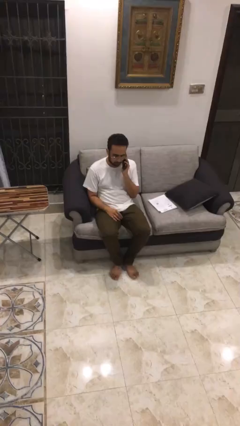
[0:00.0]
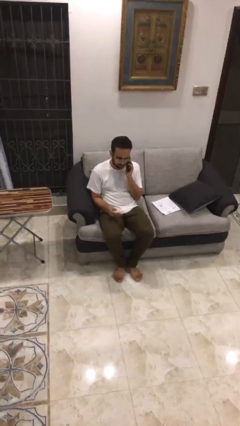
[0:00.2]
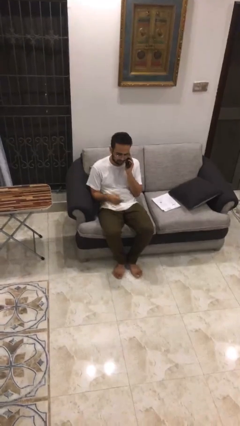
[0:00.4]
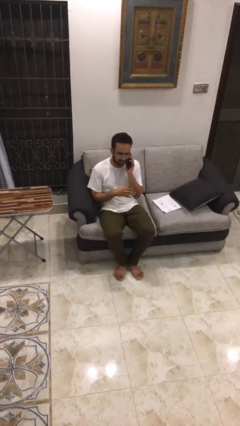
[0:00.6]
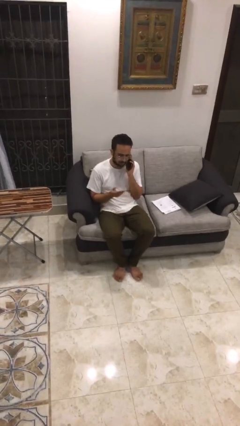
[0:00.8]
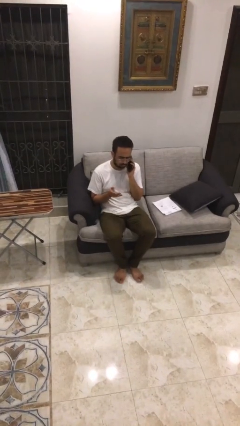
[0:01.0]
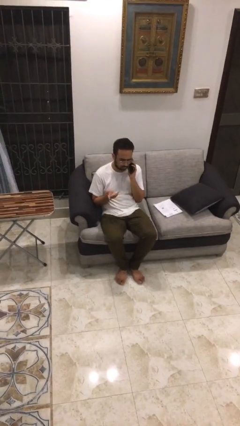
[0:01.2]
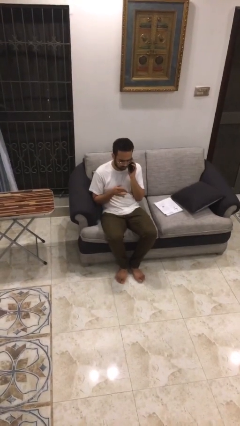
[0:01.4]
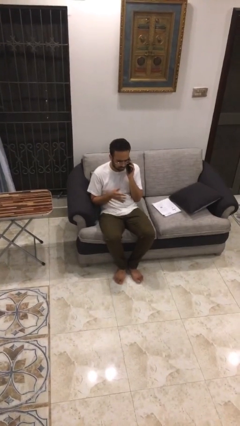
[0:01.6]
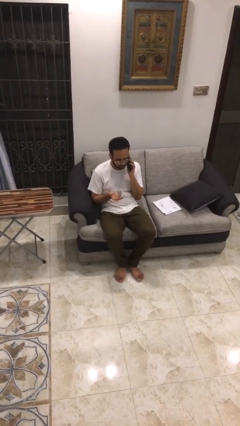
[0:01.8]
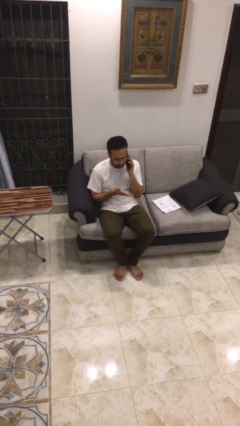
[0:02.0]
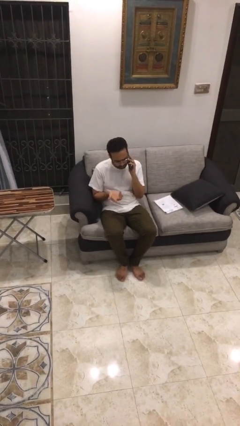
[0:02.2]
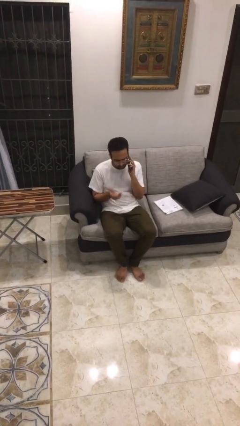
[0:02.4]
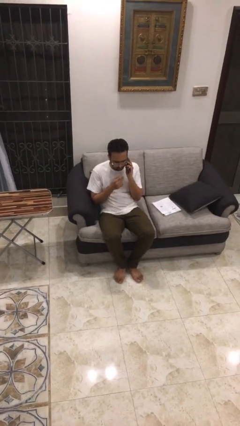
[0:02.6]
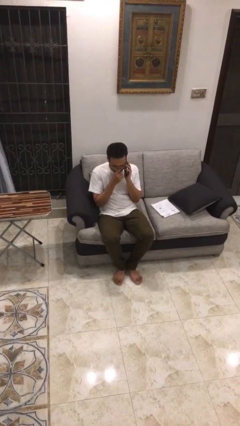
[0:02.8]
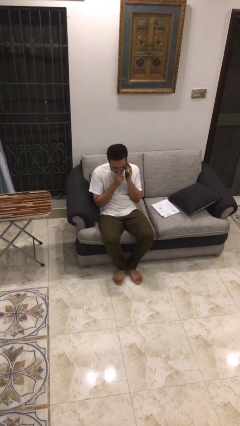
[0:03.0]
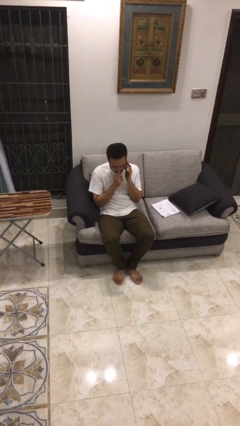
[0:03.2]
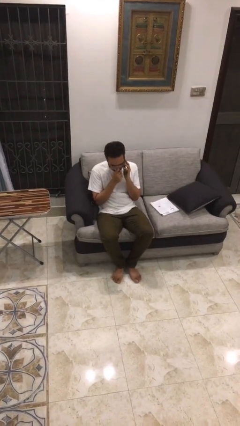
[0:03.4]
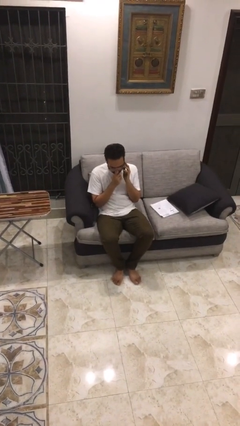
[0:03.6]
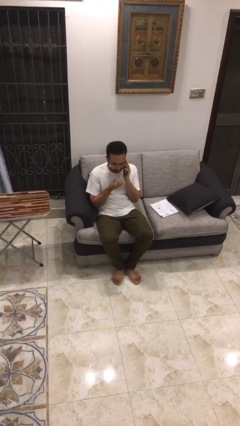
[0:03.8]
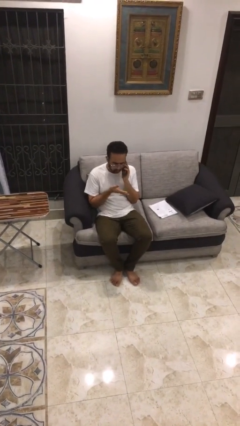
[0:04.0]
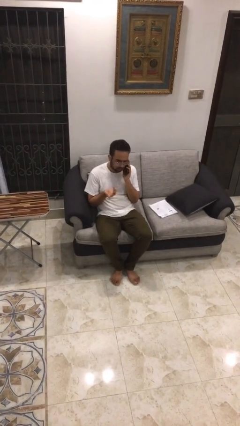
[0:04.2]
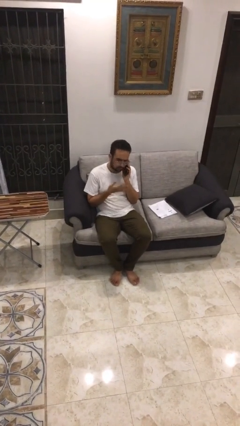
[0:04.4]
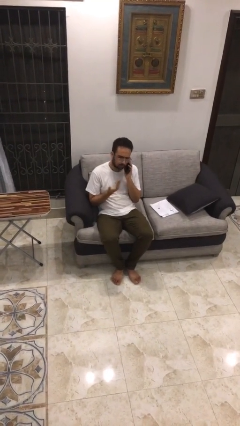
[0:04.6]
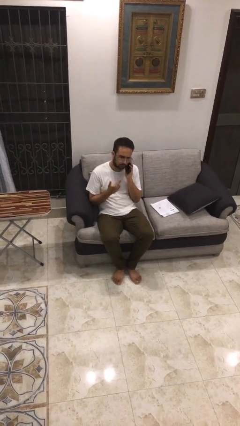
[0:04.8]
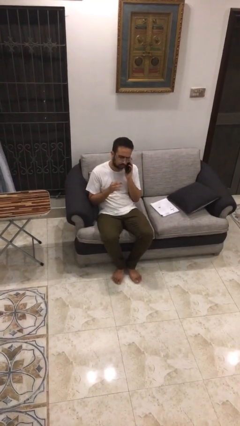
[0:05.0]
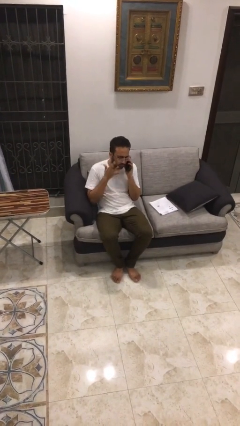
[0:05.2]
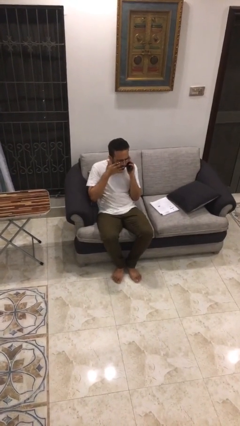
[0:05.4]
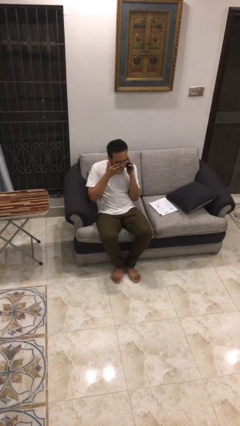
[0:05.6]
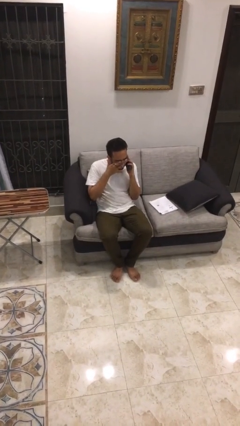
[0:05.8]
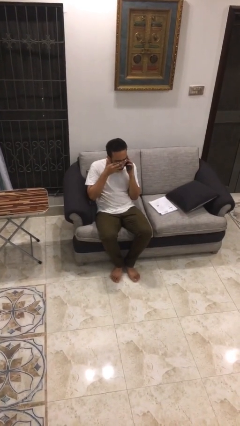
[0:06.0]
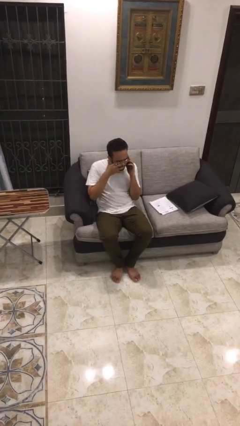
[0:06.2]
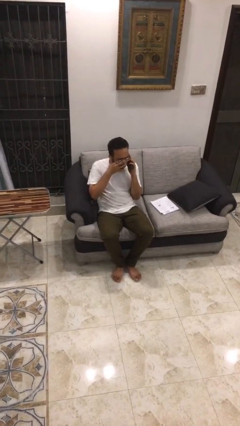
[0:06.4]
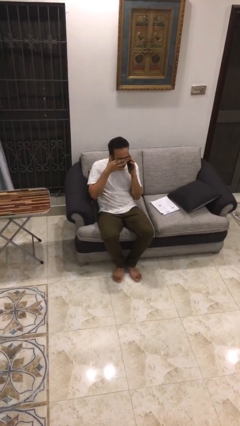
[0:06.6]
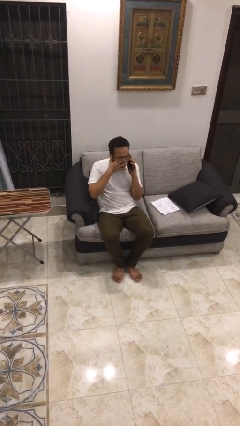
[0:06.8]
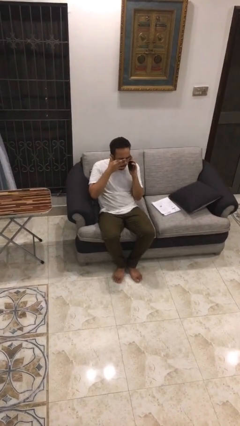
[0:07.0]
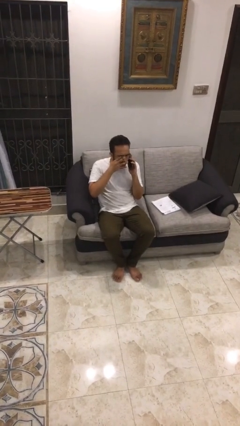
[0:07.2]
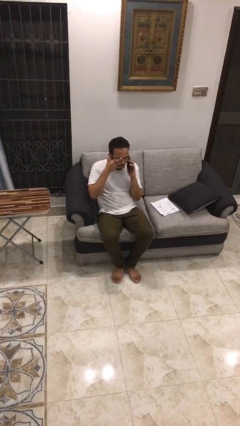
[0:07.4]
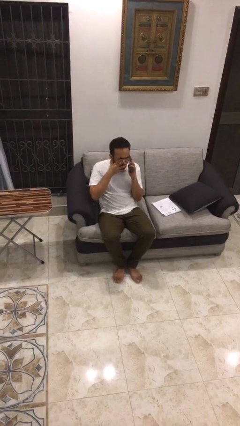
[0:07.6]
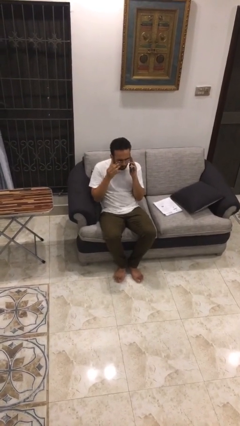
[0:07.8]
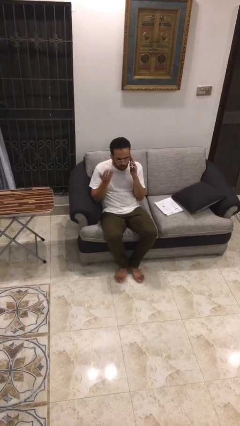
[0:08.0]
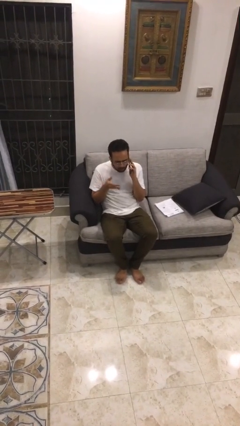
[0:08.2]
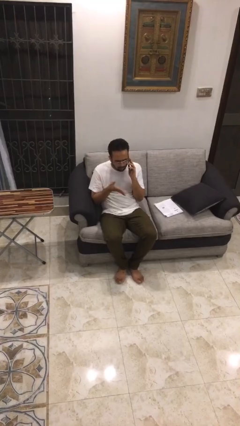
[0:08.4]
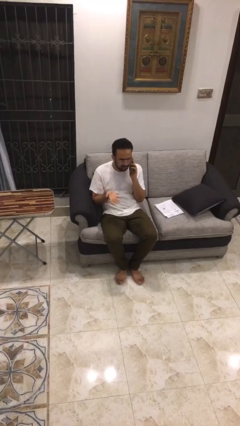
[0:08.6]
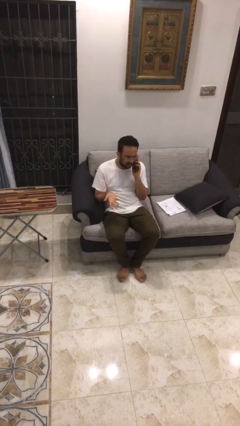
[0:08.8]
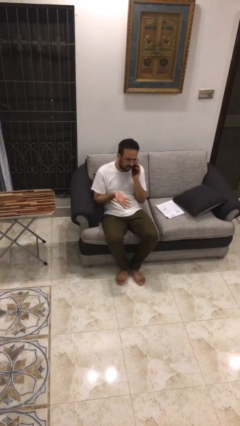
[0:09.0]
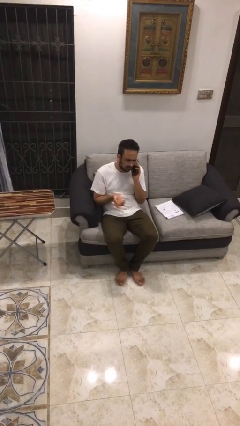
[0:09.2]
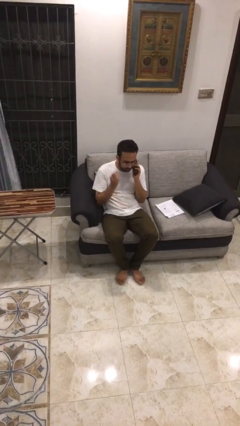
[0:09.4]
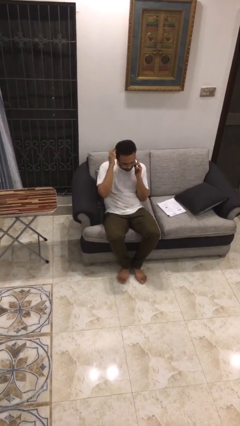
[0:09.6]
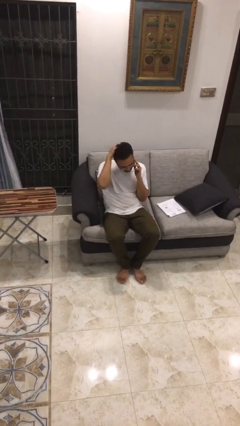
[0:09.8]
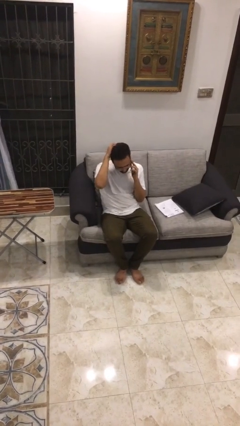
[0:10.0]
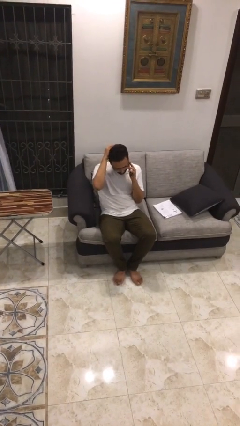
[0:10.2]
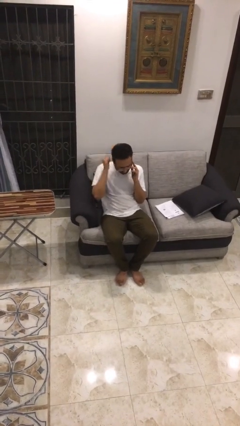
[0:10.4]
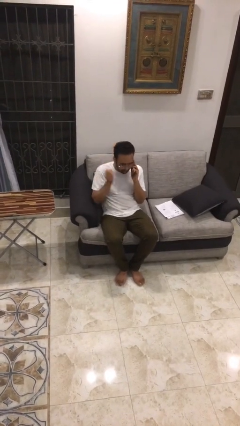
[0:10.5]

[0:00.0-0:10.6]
person talks on phone

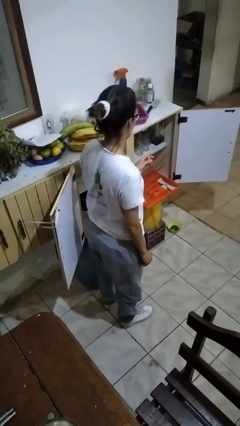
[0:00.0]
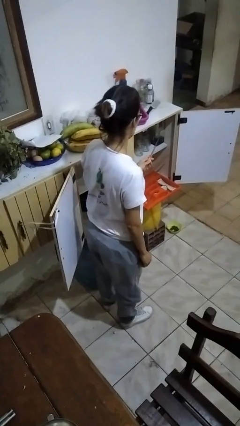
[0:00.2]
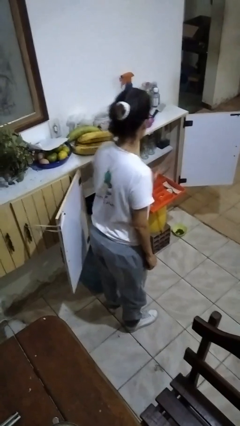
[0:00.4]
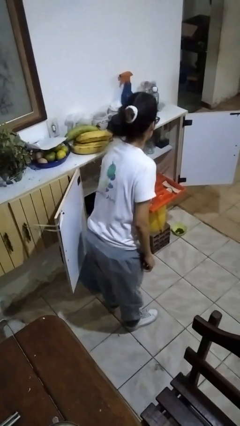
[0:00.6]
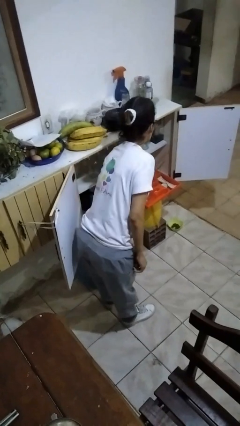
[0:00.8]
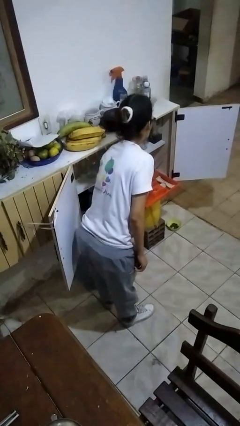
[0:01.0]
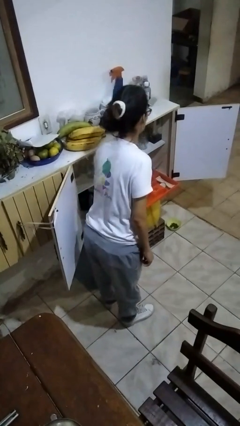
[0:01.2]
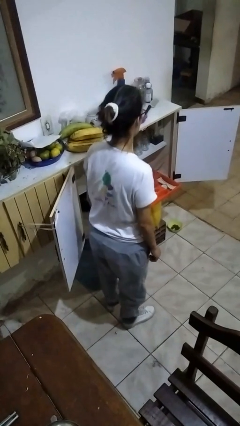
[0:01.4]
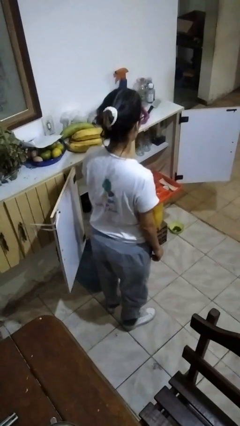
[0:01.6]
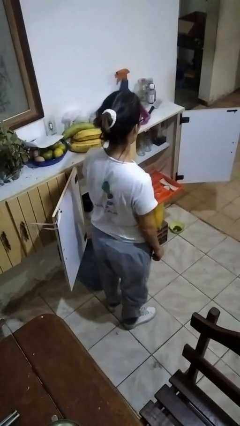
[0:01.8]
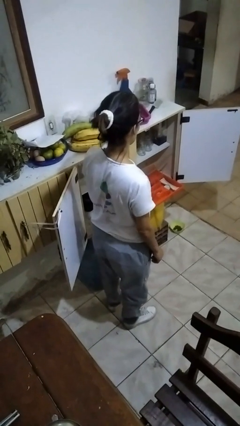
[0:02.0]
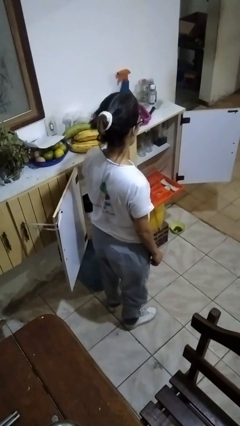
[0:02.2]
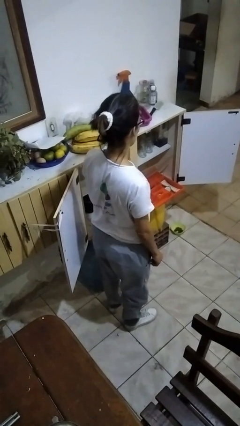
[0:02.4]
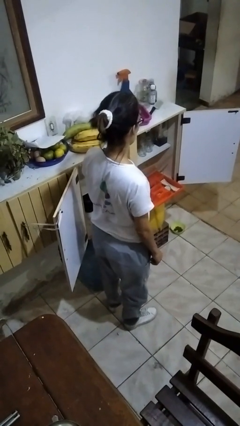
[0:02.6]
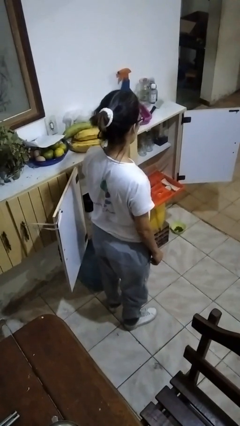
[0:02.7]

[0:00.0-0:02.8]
person puts object into kitchen drawer

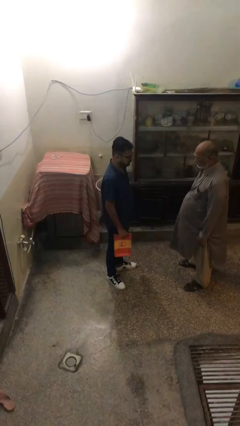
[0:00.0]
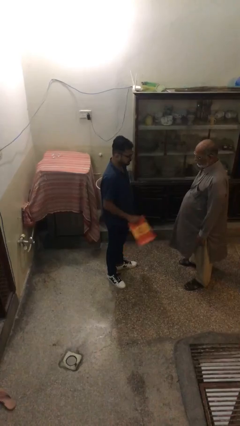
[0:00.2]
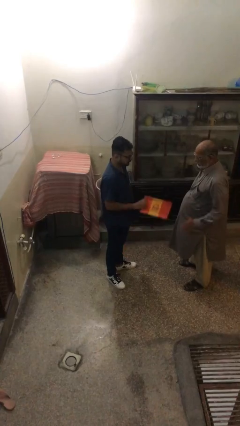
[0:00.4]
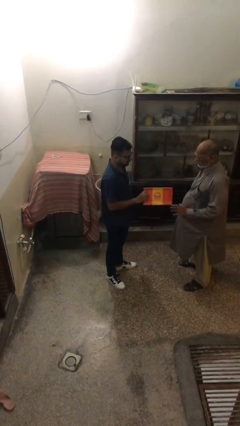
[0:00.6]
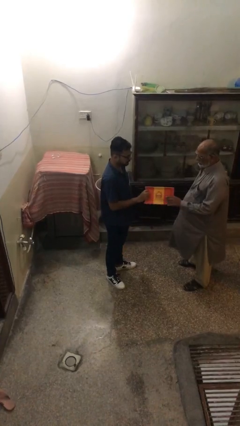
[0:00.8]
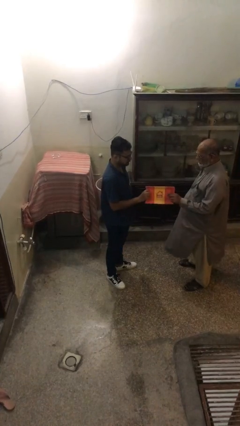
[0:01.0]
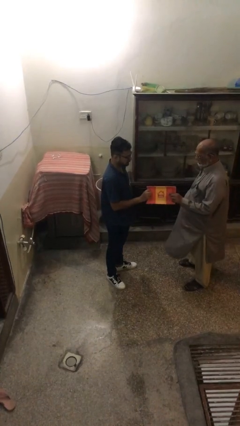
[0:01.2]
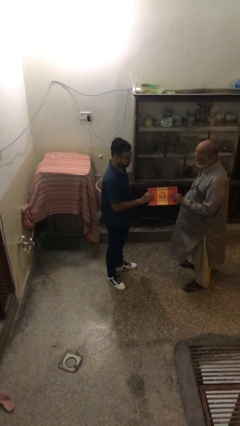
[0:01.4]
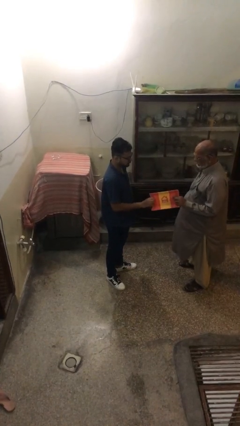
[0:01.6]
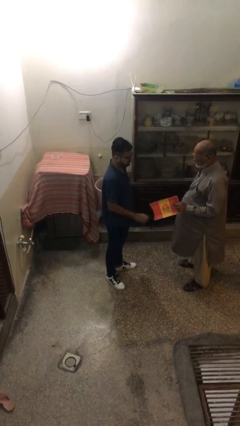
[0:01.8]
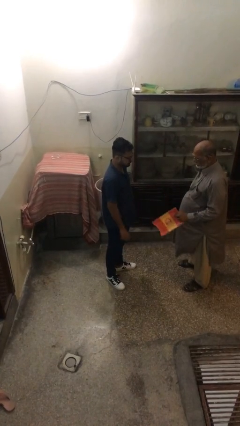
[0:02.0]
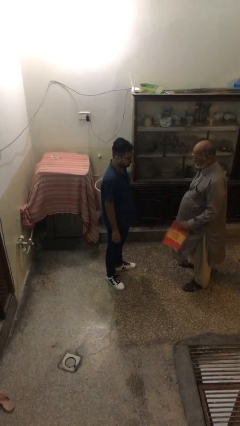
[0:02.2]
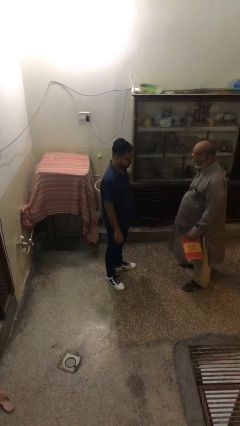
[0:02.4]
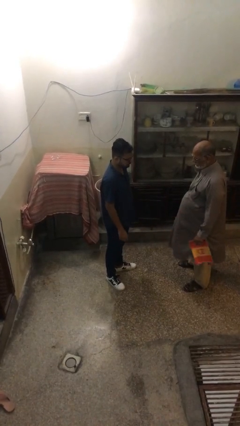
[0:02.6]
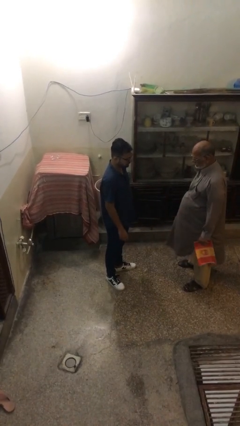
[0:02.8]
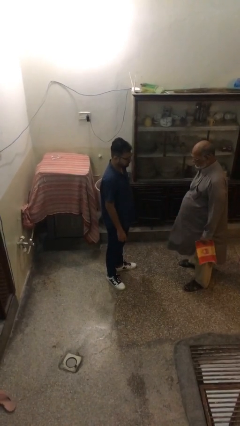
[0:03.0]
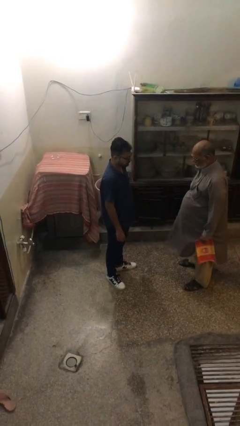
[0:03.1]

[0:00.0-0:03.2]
person transfers object to person

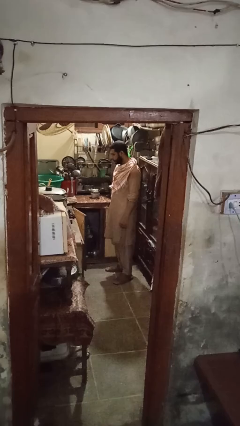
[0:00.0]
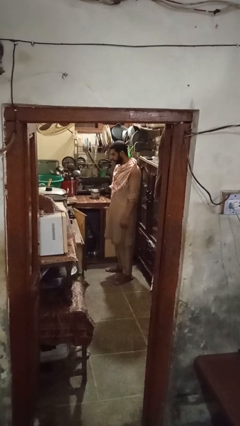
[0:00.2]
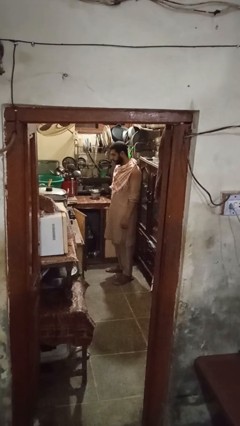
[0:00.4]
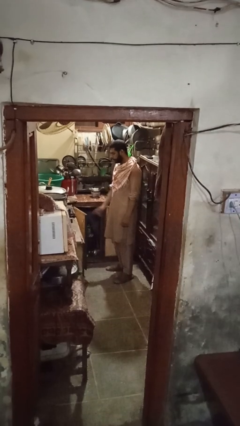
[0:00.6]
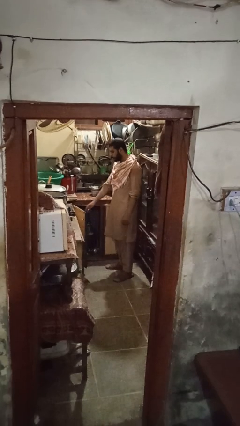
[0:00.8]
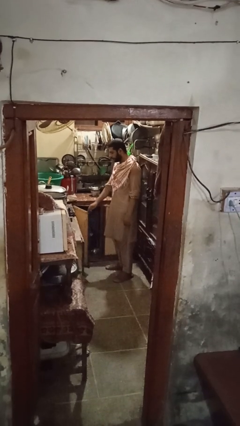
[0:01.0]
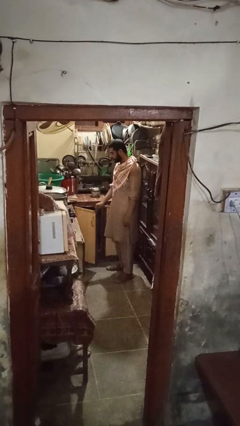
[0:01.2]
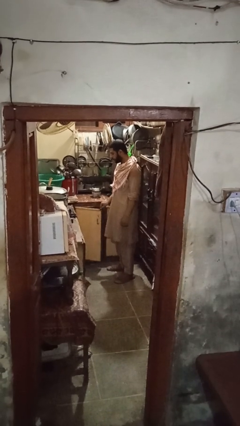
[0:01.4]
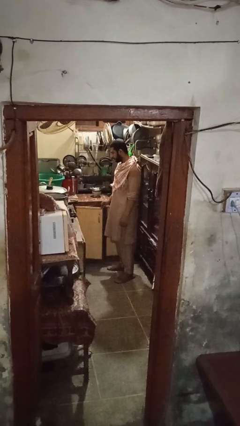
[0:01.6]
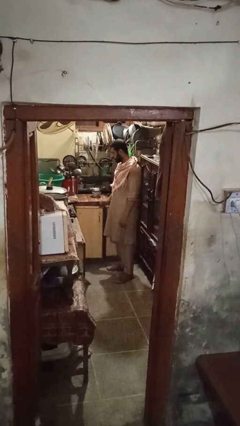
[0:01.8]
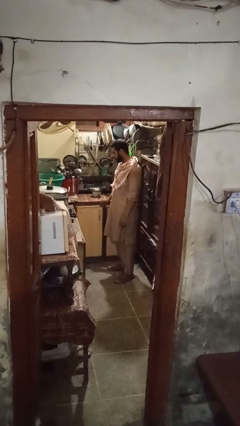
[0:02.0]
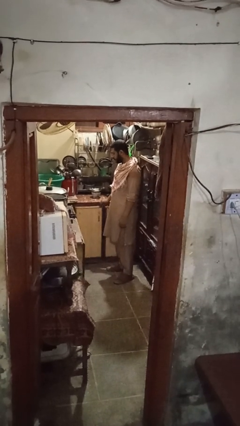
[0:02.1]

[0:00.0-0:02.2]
person closes cabinet
